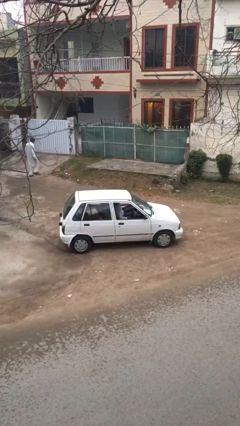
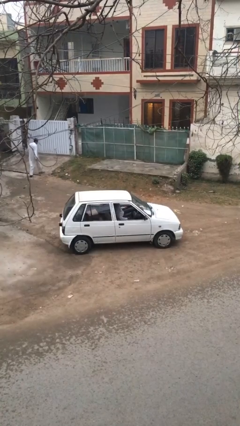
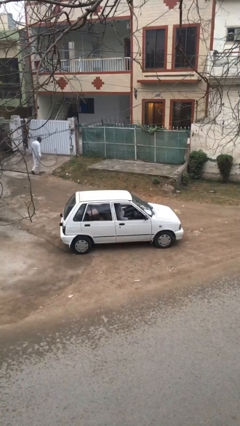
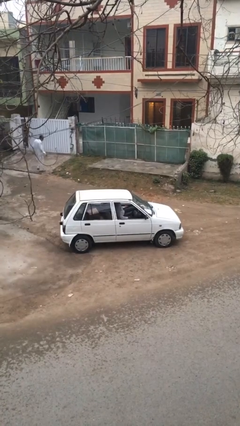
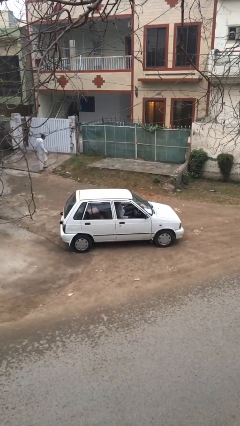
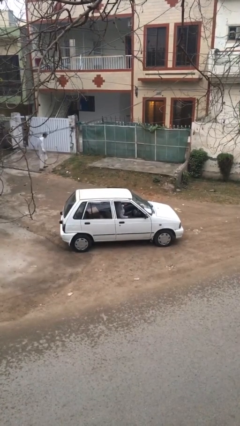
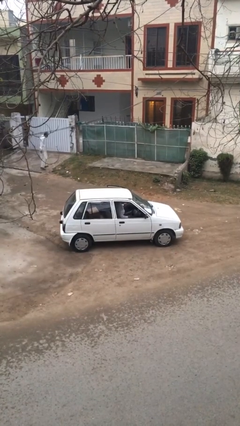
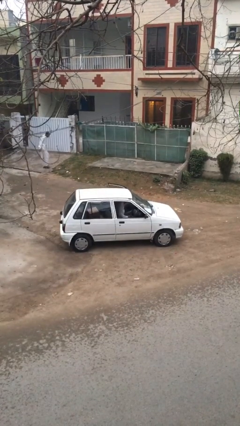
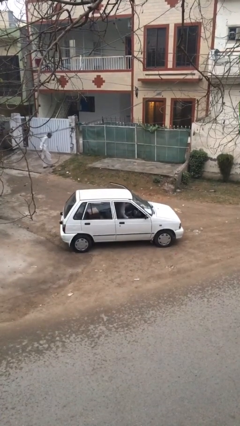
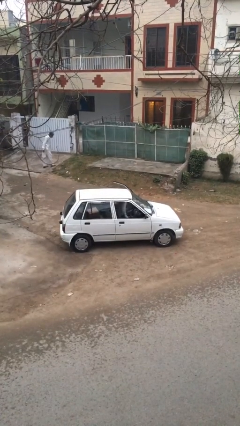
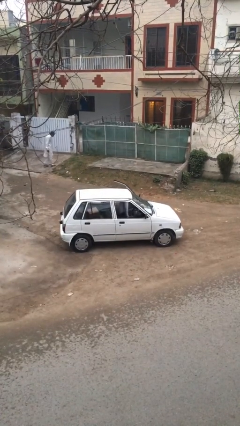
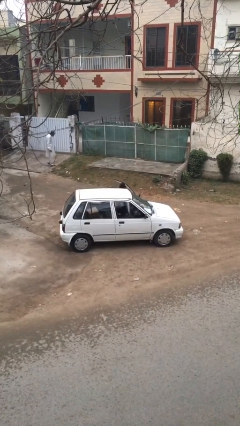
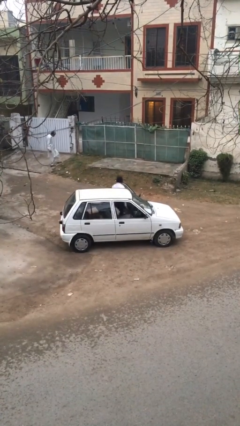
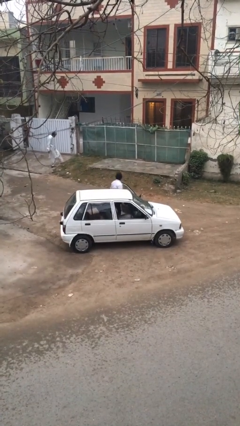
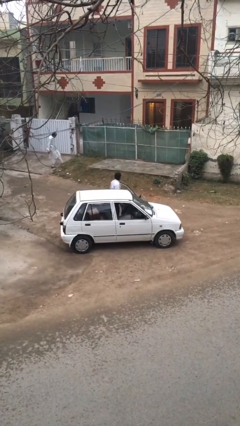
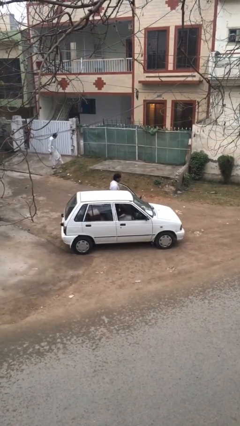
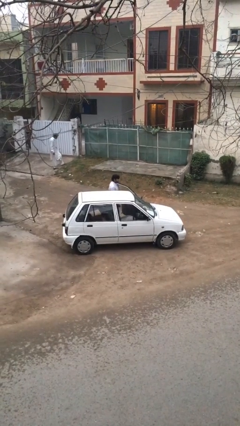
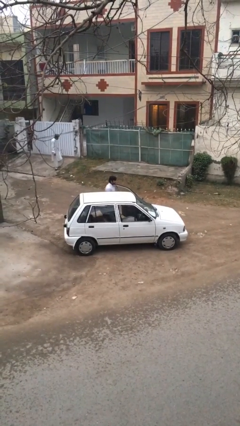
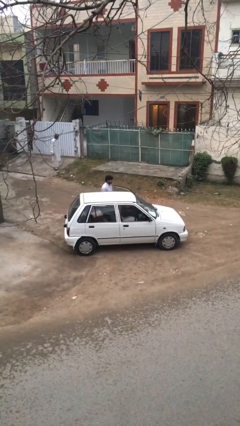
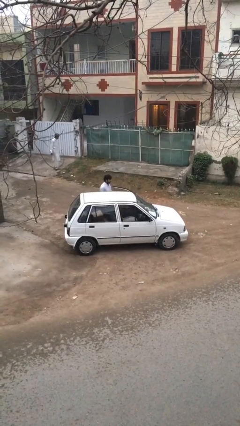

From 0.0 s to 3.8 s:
car drops off person

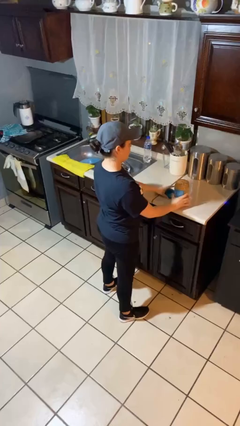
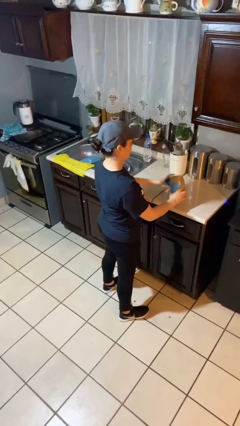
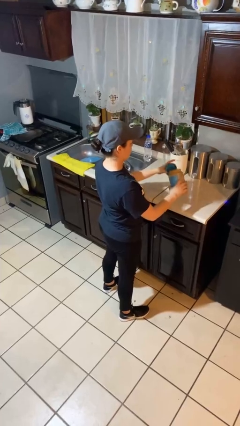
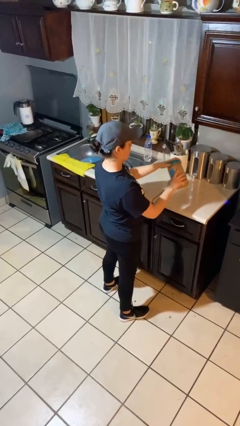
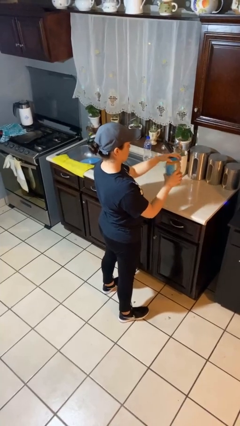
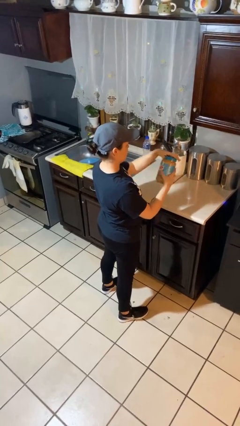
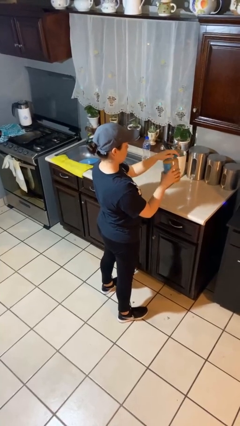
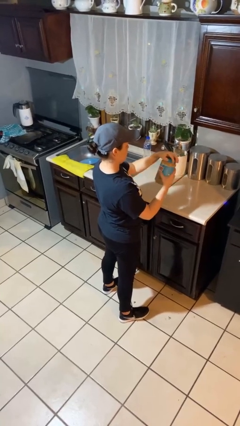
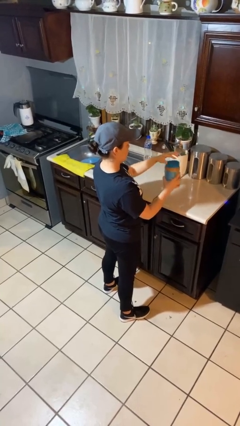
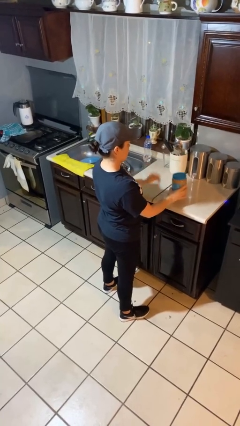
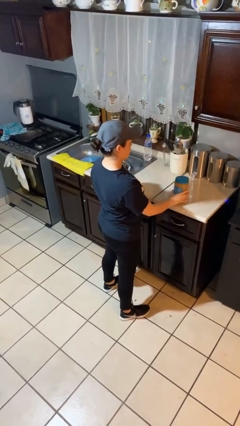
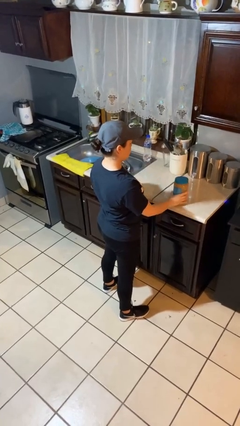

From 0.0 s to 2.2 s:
person closes jar

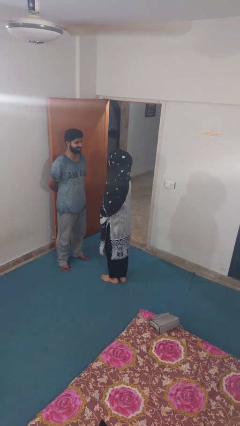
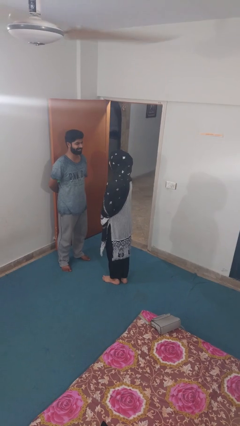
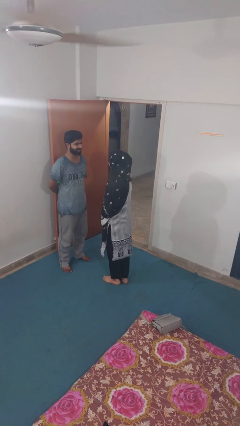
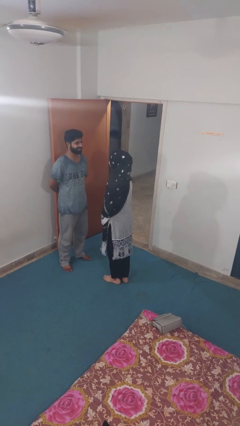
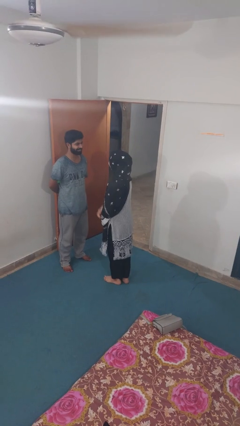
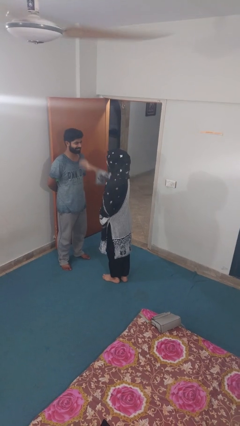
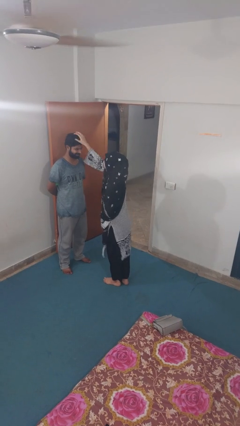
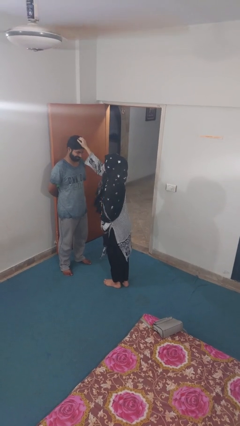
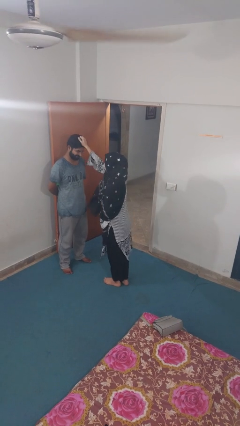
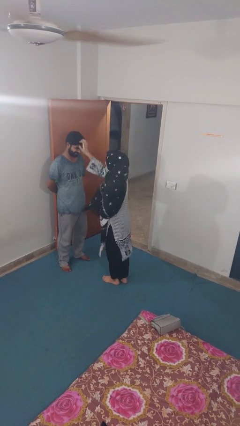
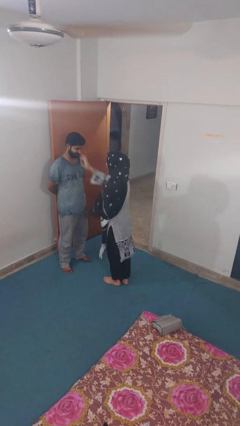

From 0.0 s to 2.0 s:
person grabs person by hair

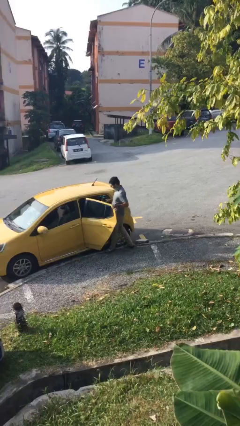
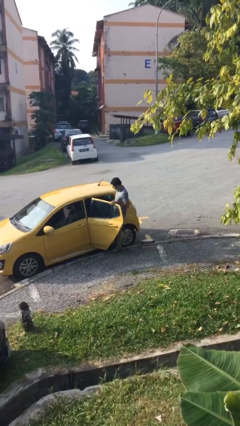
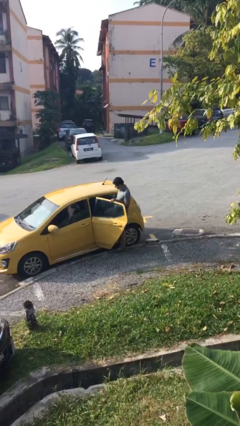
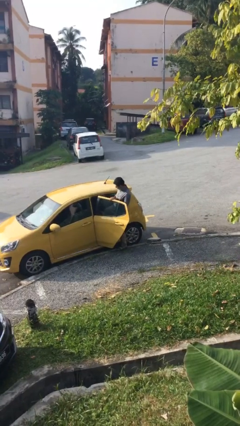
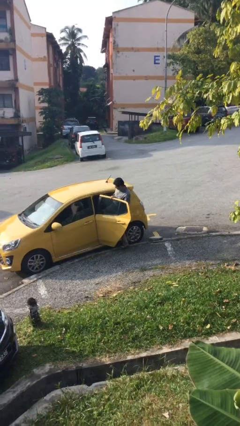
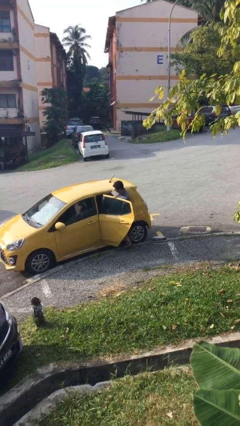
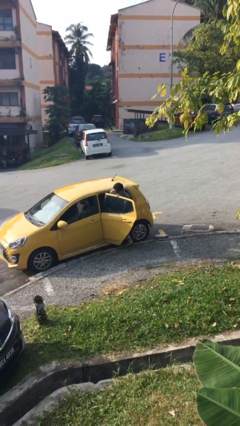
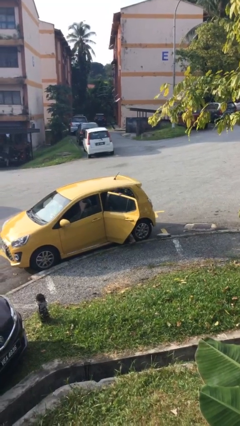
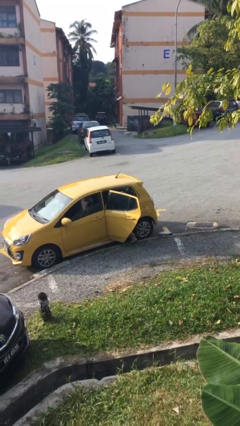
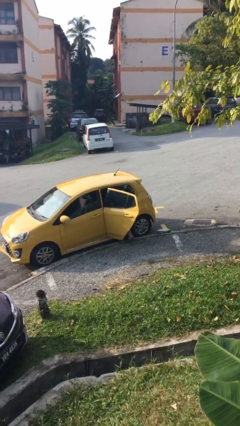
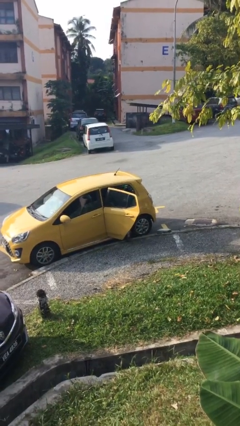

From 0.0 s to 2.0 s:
person enters car

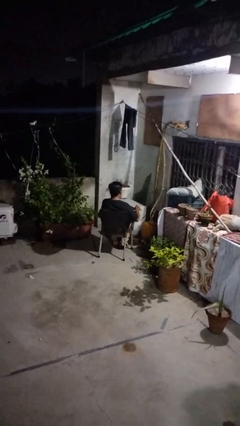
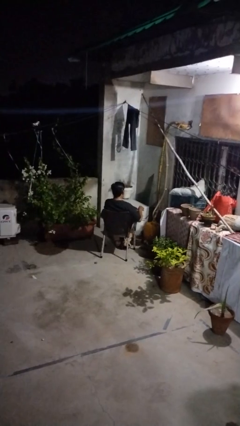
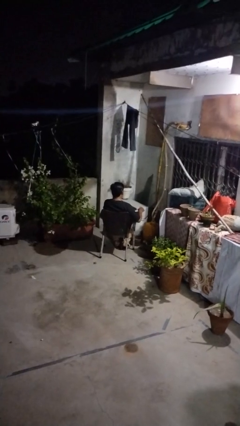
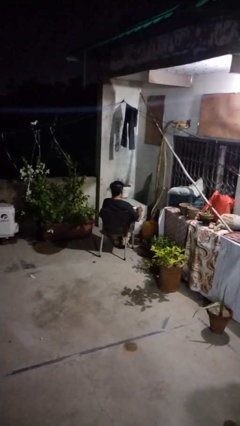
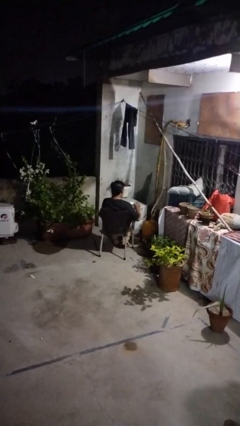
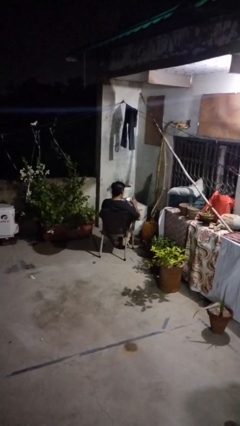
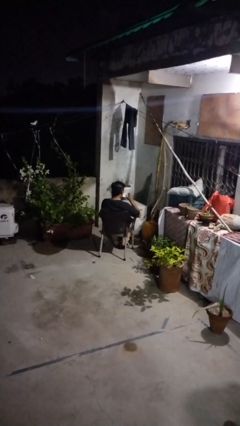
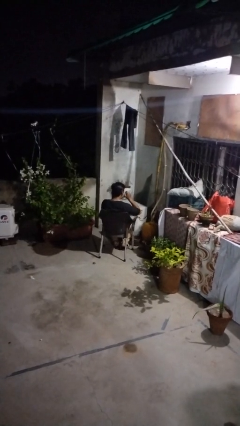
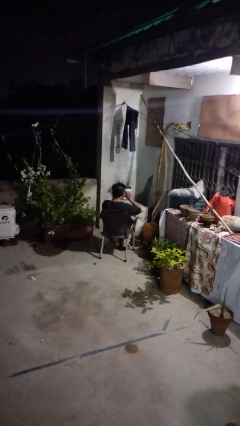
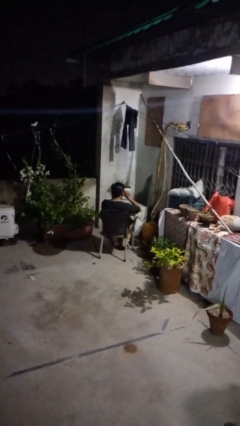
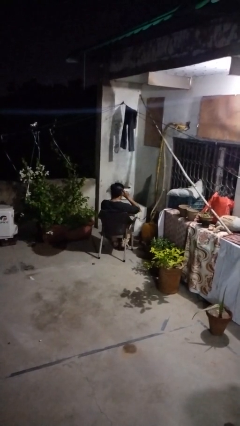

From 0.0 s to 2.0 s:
person drinks from mug

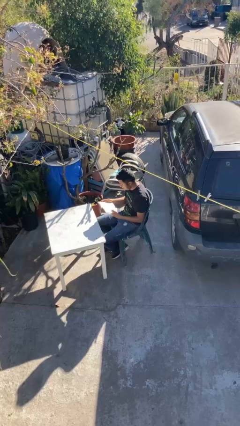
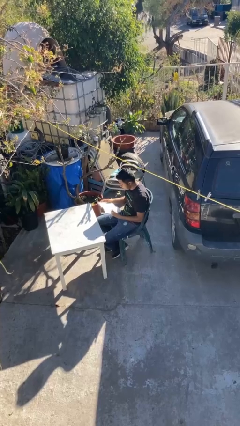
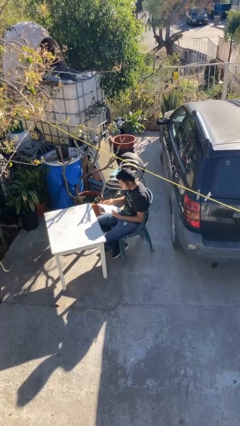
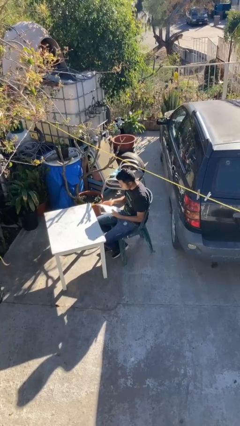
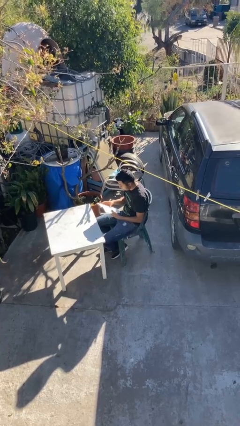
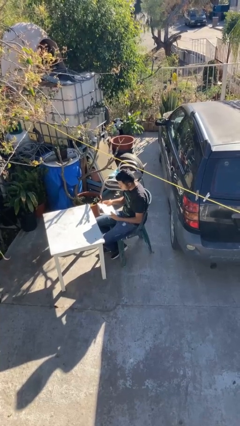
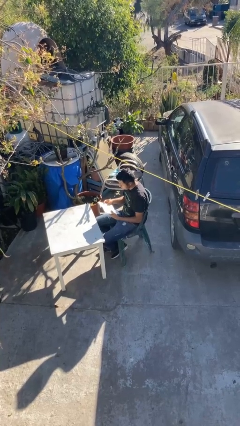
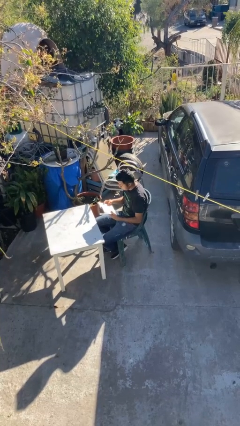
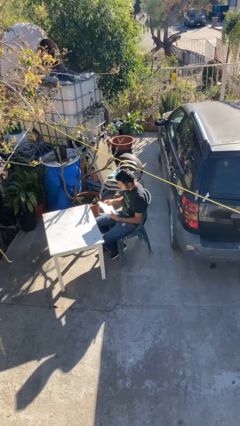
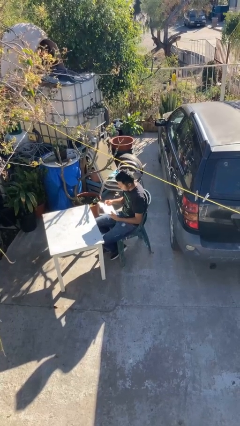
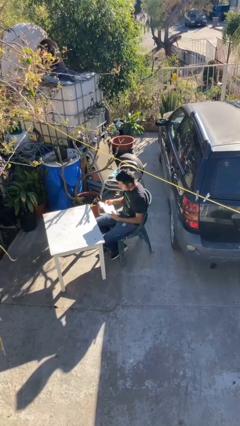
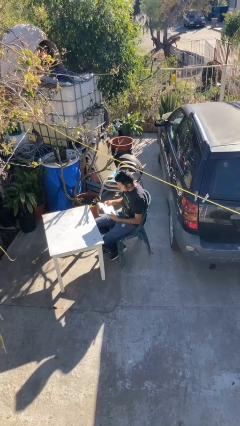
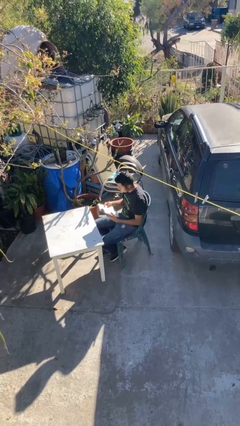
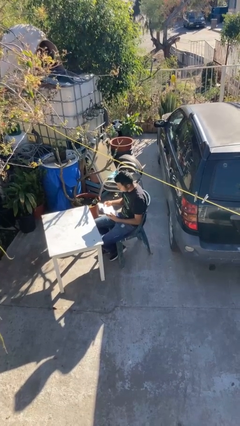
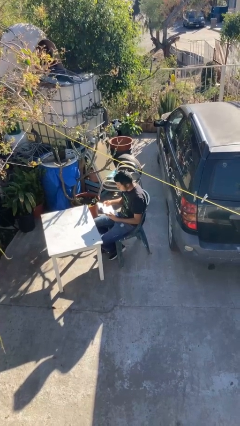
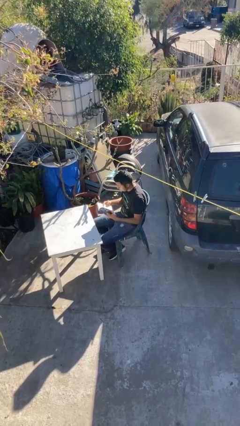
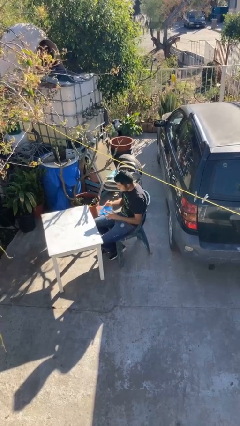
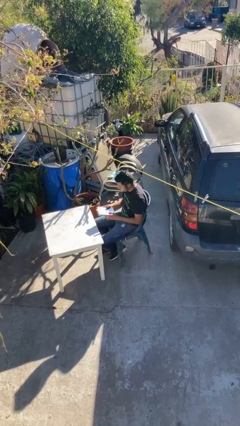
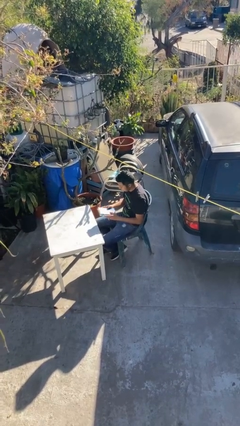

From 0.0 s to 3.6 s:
person reads document

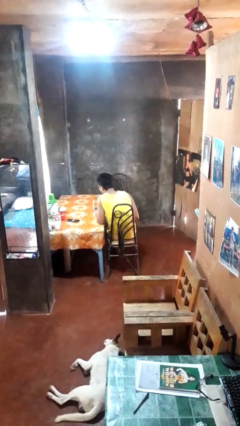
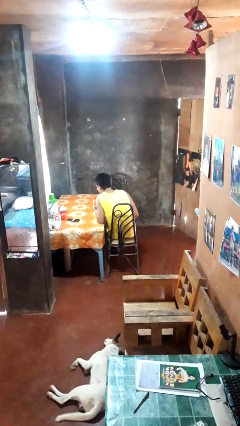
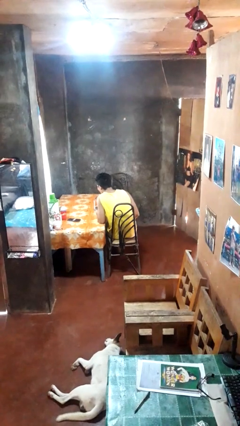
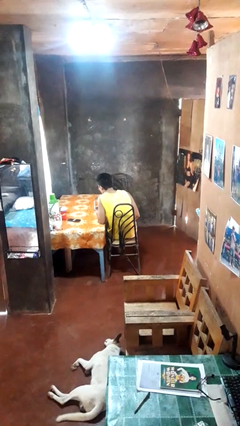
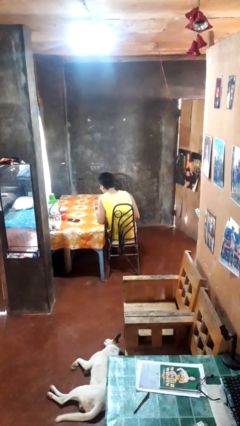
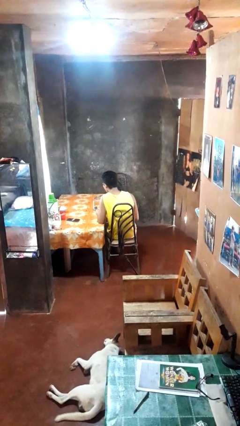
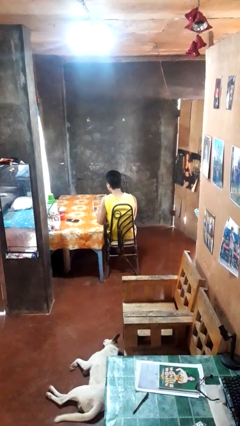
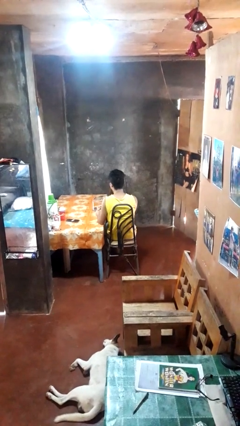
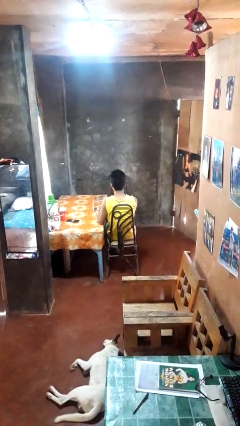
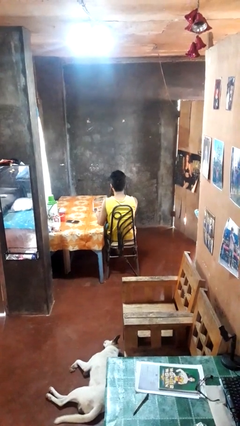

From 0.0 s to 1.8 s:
person extinguishes candle
